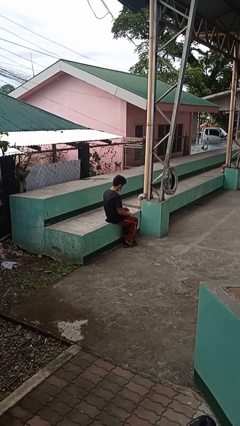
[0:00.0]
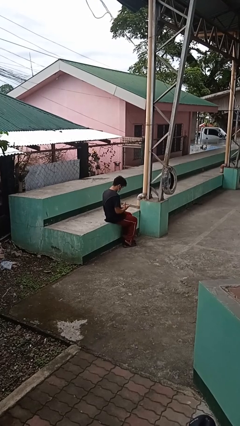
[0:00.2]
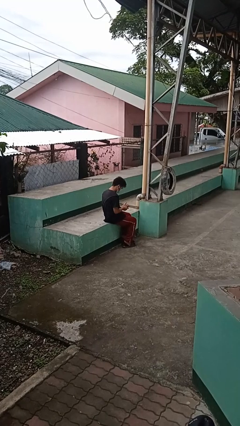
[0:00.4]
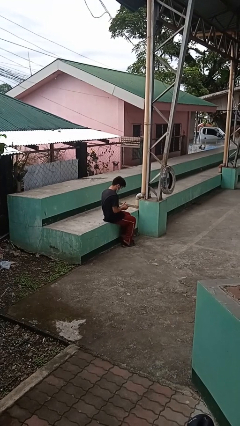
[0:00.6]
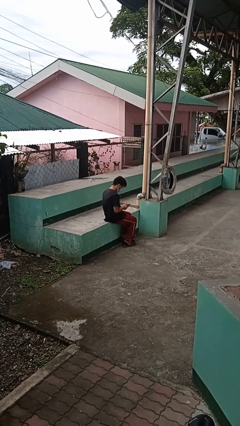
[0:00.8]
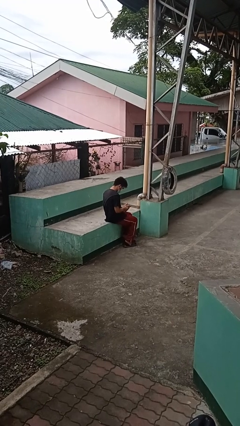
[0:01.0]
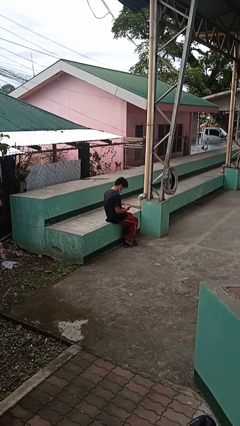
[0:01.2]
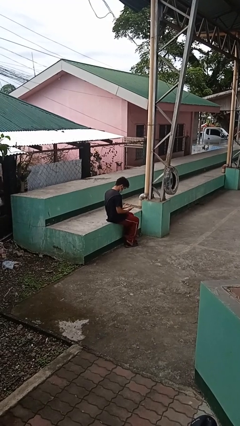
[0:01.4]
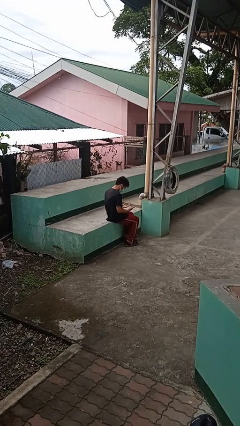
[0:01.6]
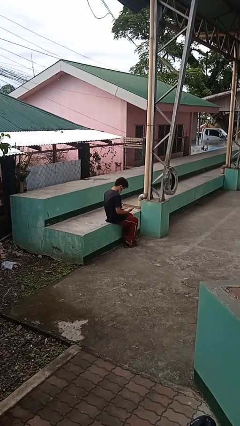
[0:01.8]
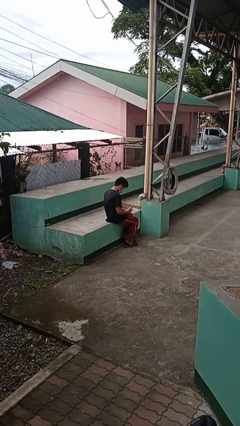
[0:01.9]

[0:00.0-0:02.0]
person looks at hands in lap

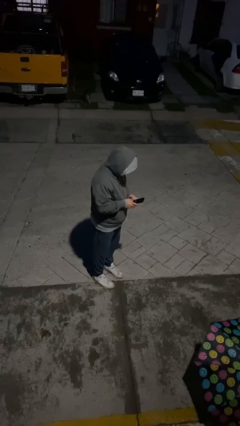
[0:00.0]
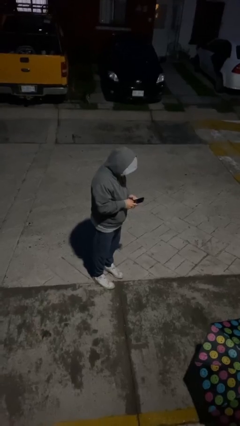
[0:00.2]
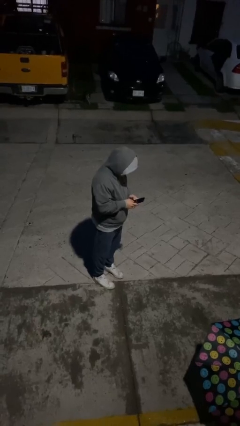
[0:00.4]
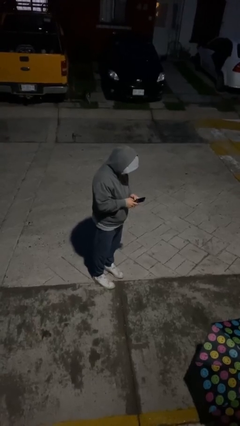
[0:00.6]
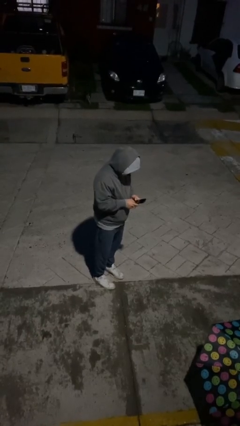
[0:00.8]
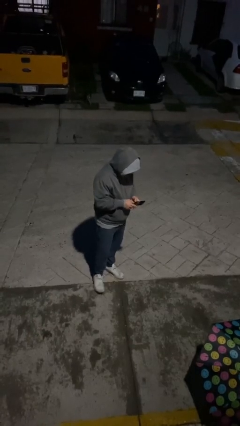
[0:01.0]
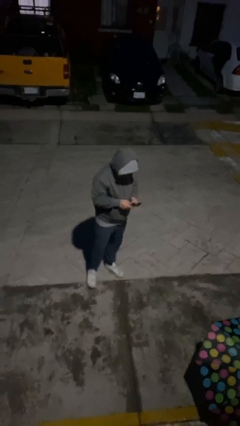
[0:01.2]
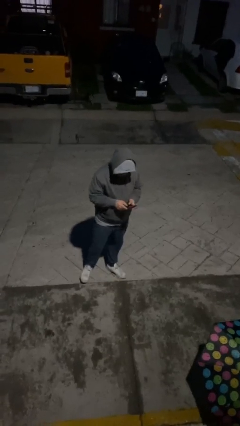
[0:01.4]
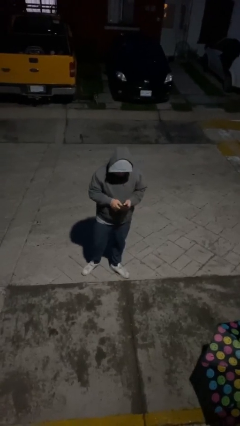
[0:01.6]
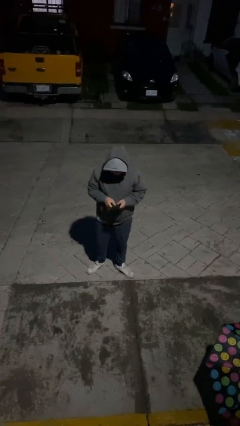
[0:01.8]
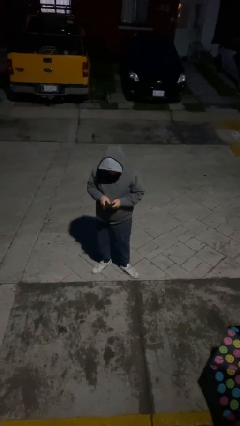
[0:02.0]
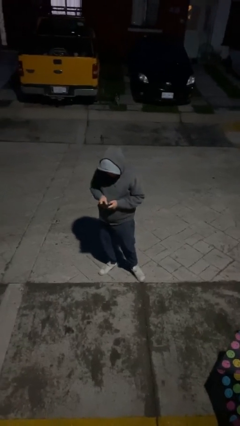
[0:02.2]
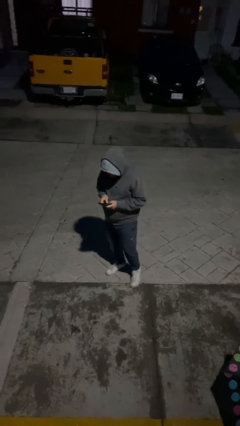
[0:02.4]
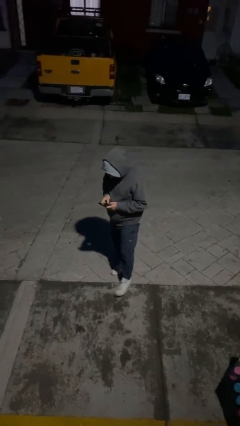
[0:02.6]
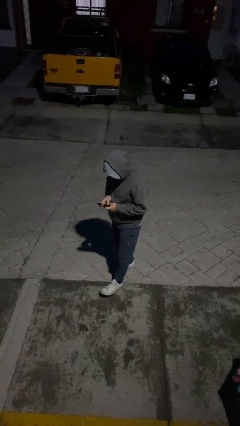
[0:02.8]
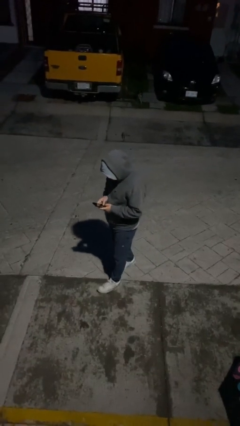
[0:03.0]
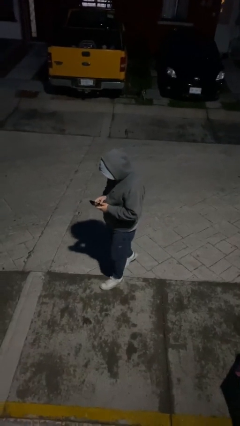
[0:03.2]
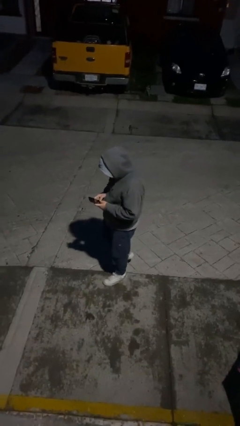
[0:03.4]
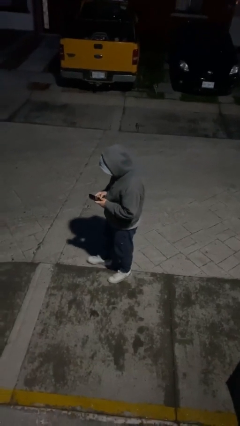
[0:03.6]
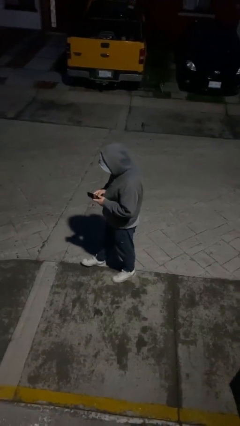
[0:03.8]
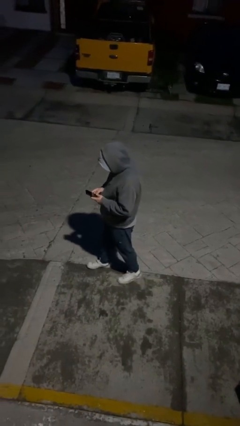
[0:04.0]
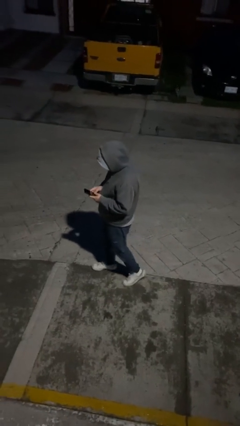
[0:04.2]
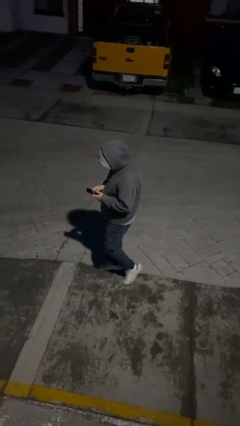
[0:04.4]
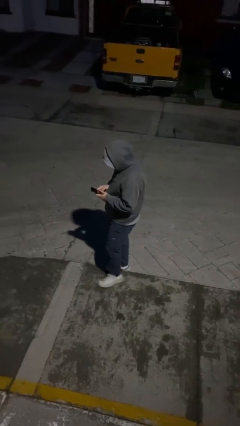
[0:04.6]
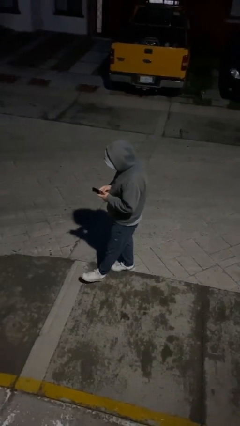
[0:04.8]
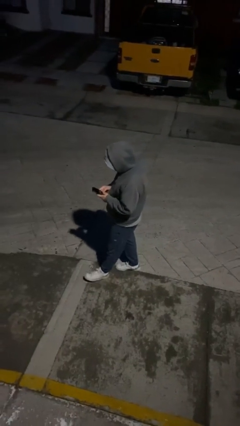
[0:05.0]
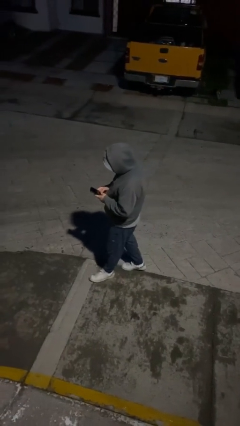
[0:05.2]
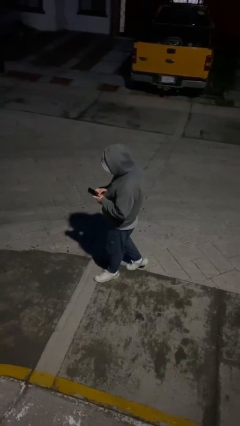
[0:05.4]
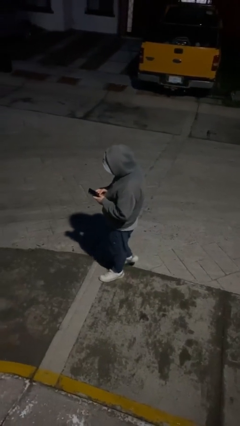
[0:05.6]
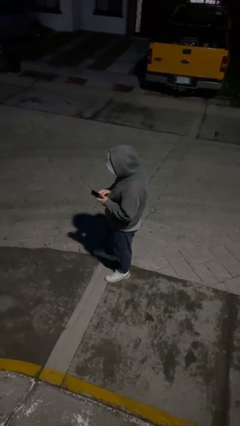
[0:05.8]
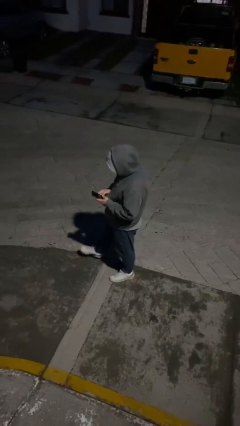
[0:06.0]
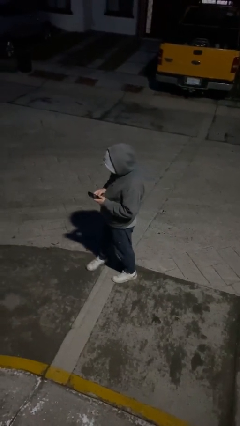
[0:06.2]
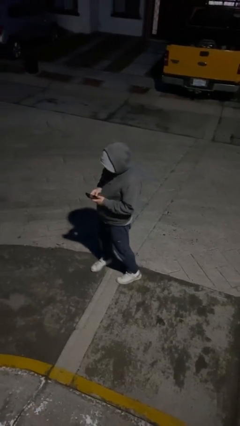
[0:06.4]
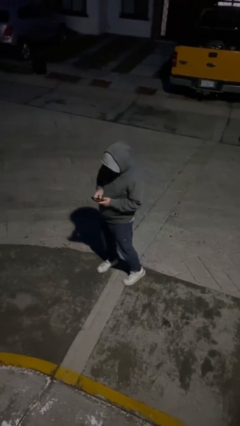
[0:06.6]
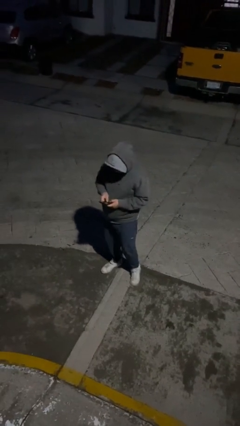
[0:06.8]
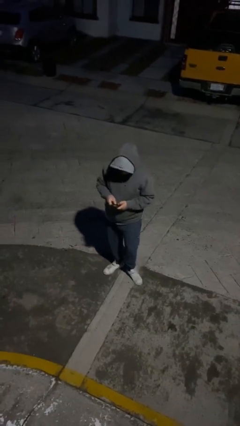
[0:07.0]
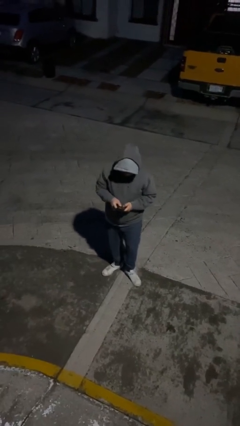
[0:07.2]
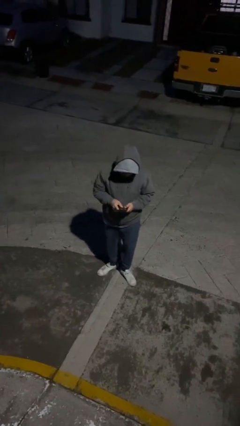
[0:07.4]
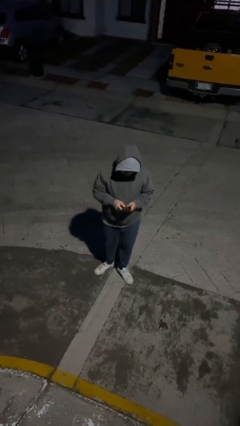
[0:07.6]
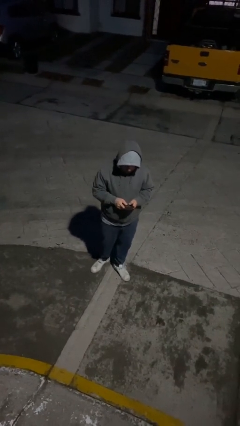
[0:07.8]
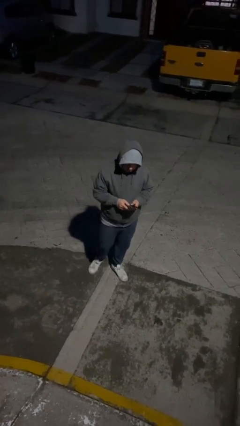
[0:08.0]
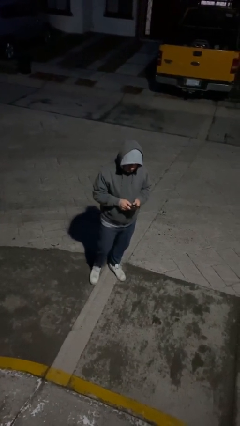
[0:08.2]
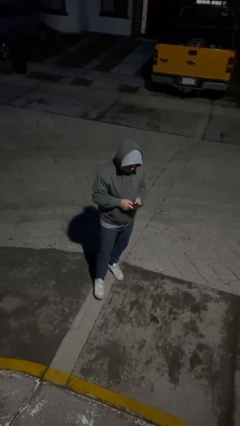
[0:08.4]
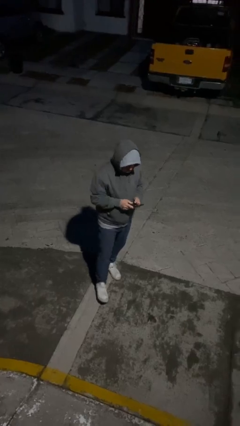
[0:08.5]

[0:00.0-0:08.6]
person texts on phone

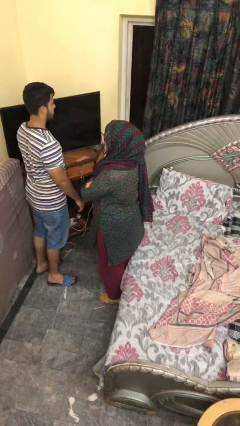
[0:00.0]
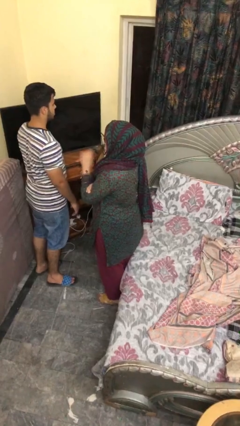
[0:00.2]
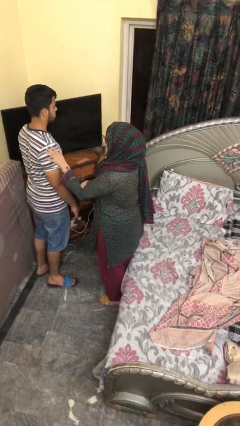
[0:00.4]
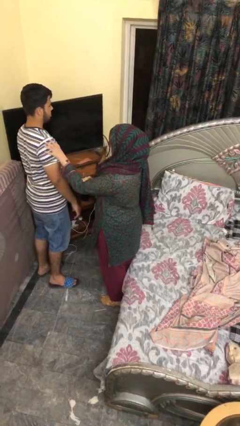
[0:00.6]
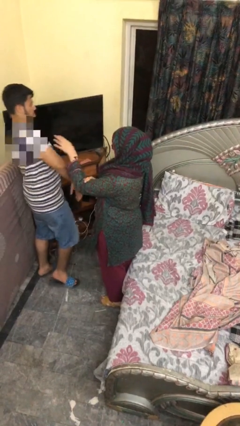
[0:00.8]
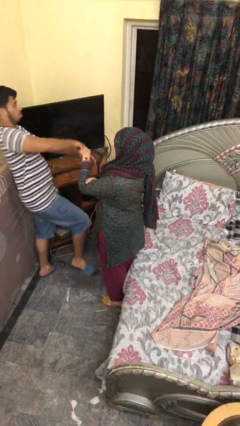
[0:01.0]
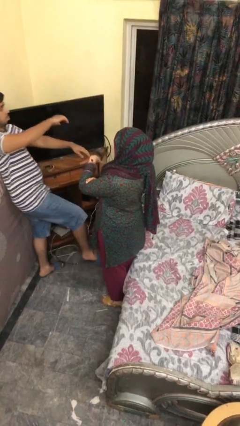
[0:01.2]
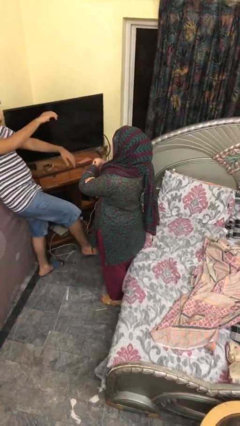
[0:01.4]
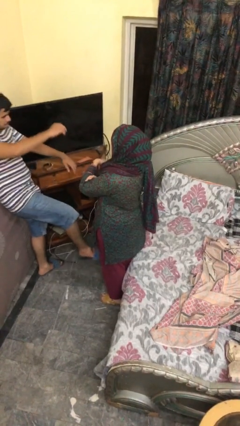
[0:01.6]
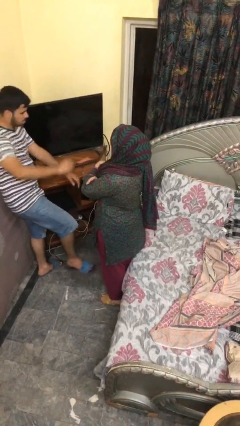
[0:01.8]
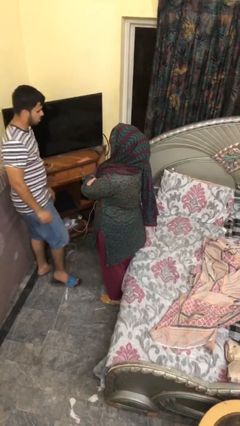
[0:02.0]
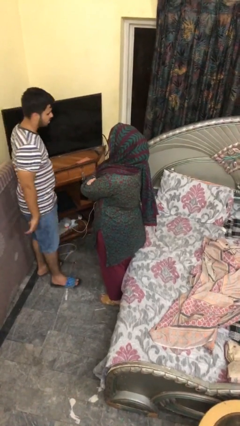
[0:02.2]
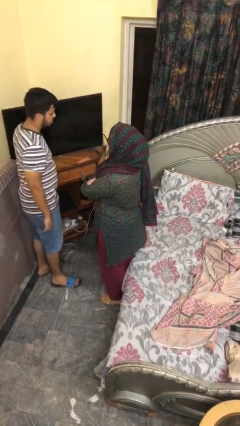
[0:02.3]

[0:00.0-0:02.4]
person shoves person

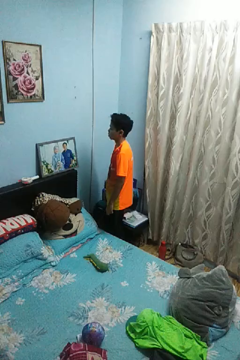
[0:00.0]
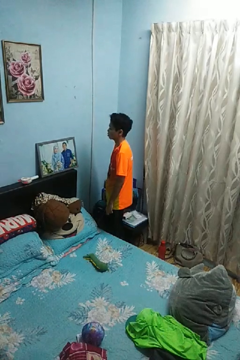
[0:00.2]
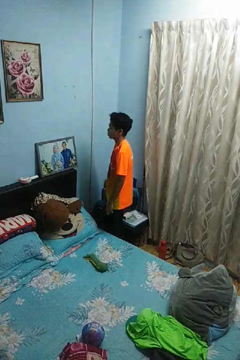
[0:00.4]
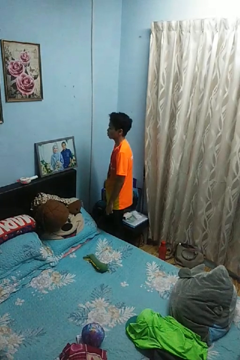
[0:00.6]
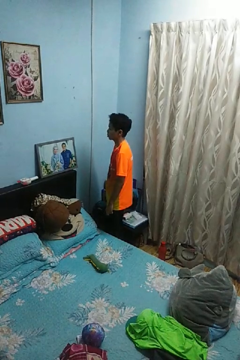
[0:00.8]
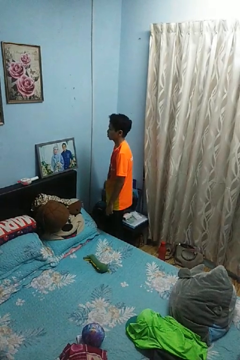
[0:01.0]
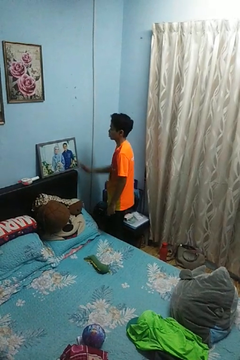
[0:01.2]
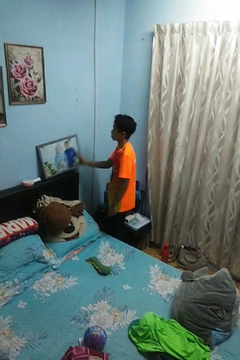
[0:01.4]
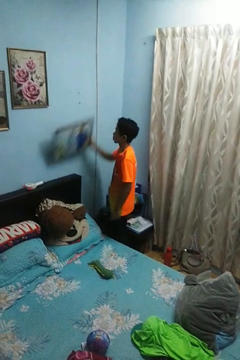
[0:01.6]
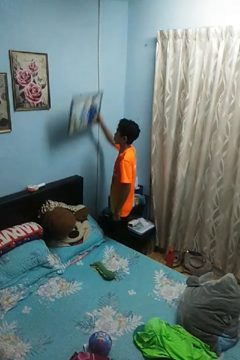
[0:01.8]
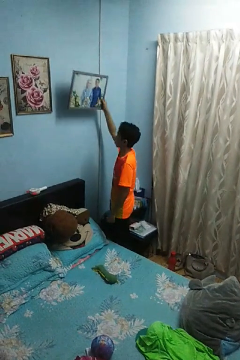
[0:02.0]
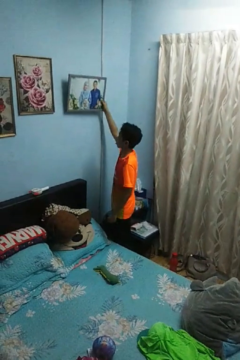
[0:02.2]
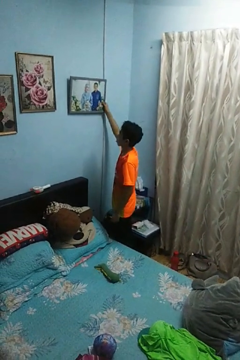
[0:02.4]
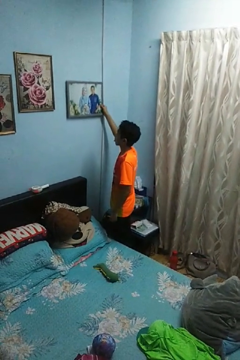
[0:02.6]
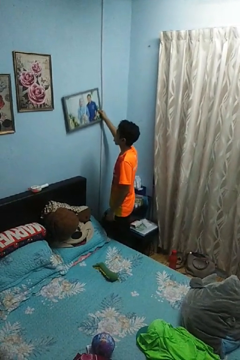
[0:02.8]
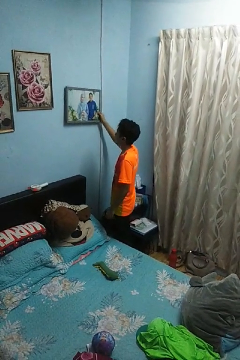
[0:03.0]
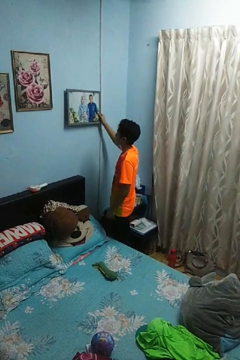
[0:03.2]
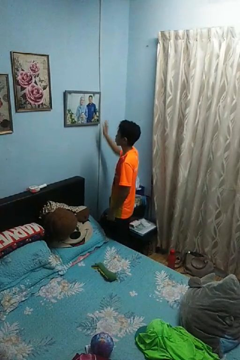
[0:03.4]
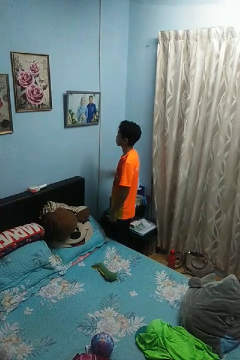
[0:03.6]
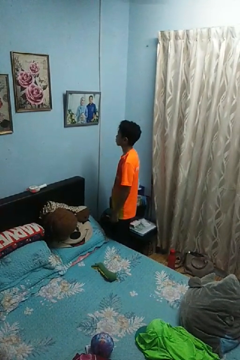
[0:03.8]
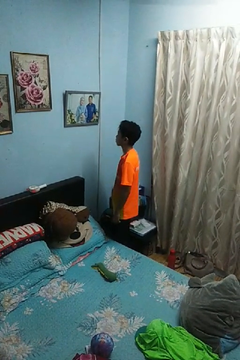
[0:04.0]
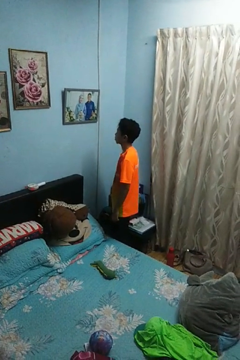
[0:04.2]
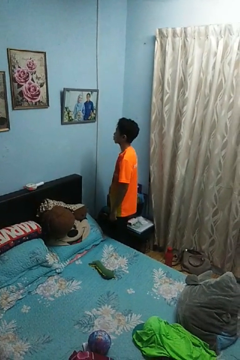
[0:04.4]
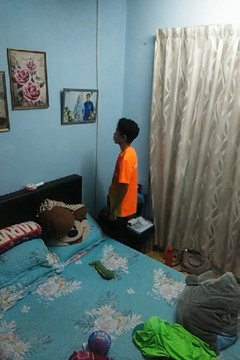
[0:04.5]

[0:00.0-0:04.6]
person puts up picture frame

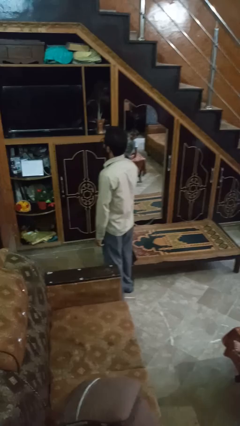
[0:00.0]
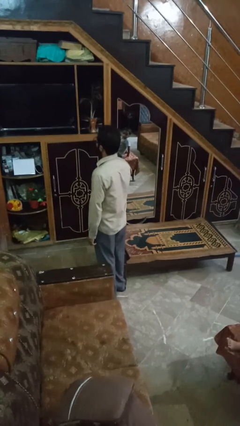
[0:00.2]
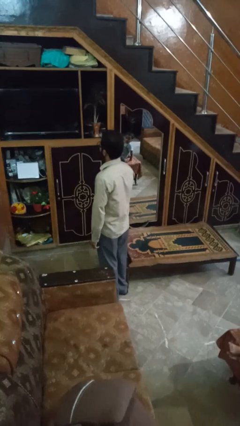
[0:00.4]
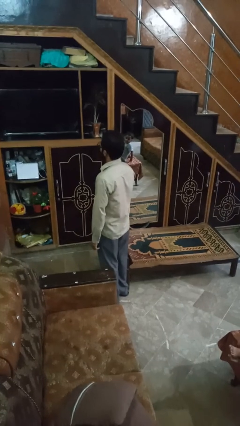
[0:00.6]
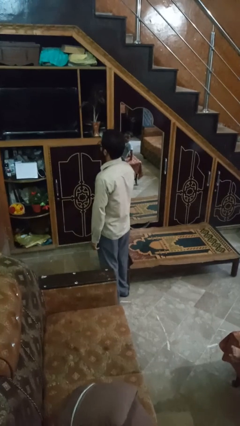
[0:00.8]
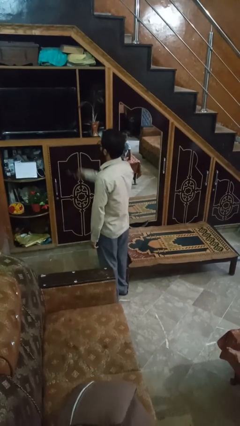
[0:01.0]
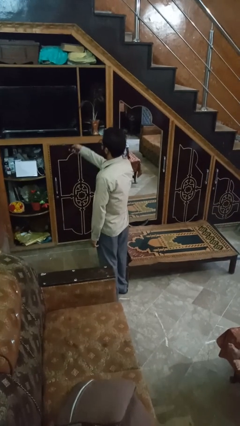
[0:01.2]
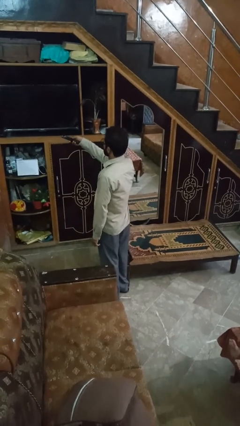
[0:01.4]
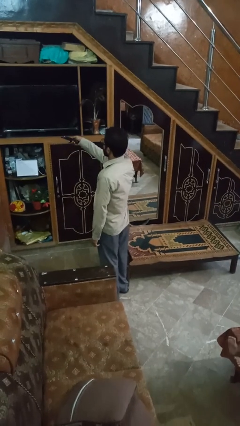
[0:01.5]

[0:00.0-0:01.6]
person uses television remote
